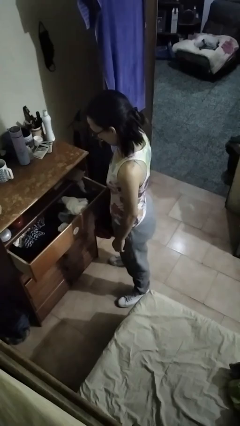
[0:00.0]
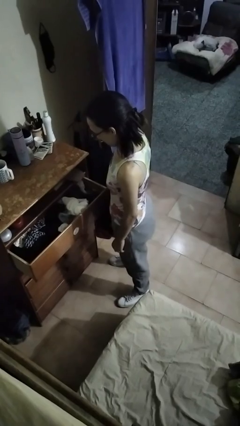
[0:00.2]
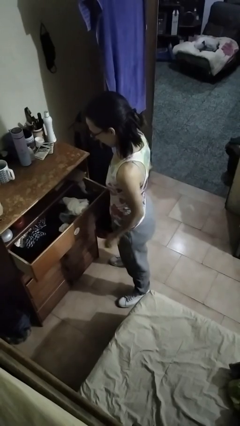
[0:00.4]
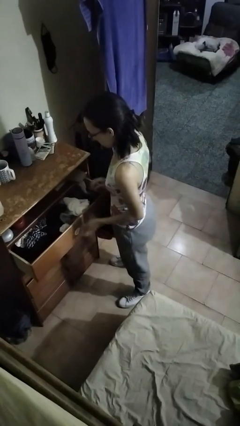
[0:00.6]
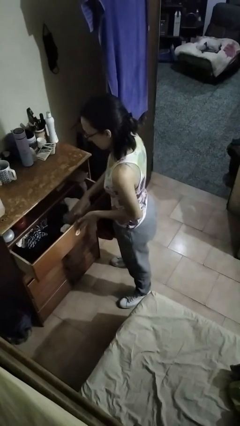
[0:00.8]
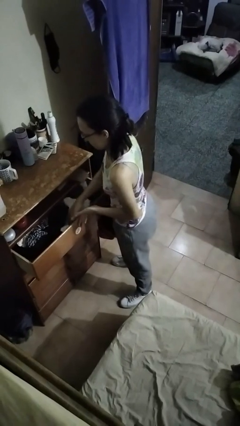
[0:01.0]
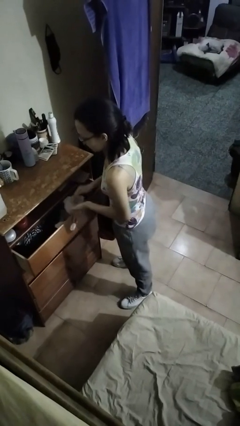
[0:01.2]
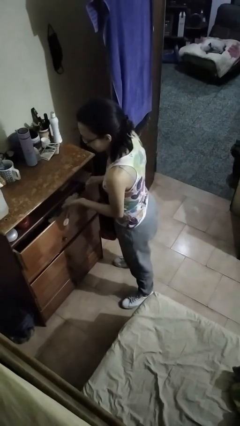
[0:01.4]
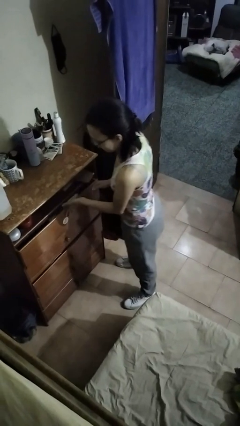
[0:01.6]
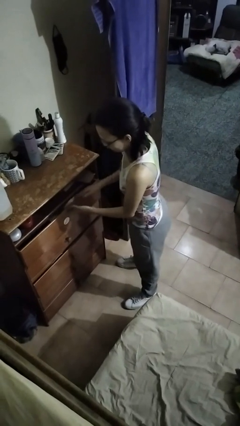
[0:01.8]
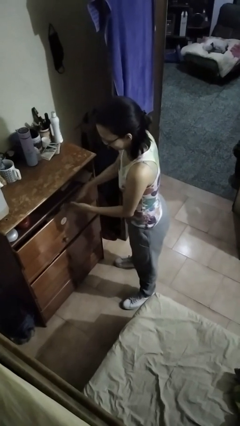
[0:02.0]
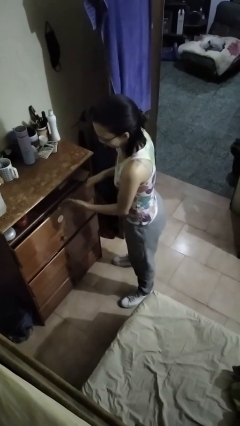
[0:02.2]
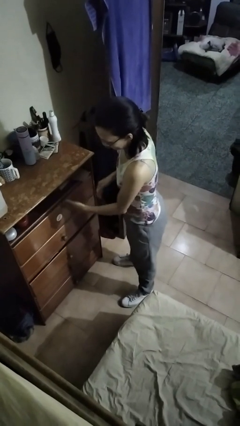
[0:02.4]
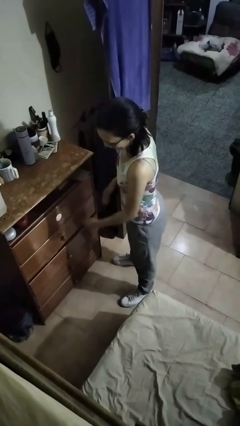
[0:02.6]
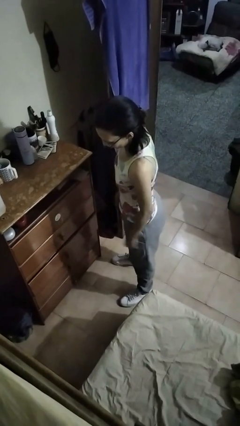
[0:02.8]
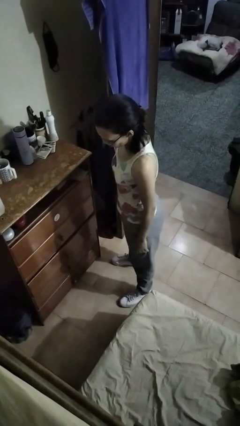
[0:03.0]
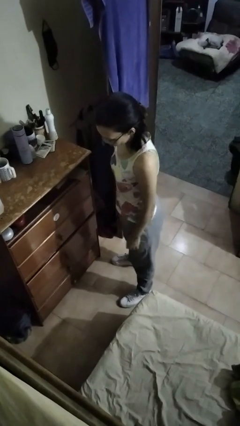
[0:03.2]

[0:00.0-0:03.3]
person closes dresser drawer

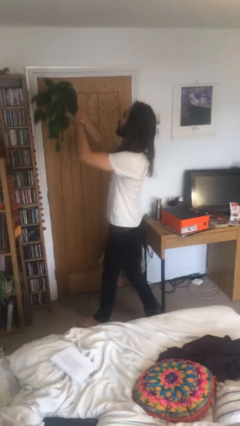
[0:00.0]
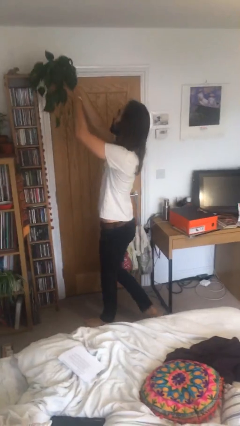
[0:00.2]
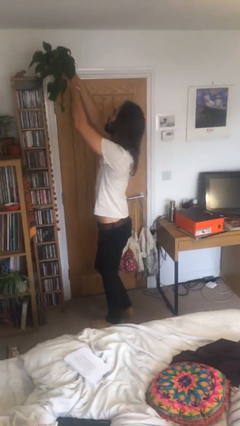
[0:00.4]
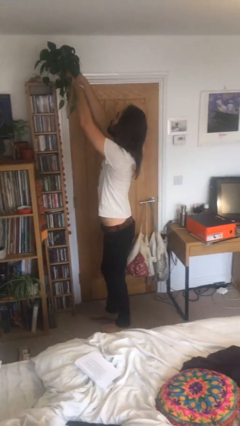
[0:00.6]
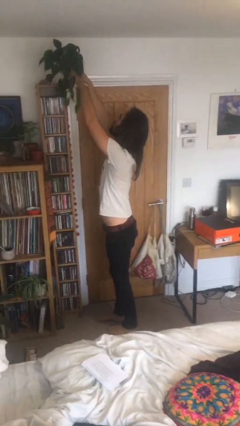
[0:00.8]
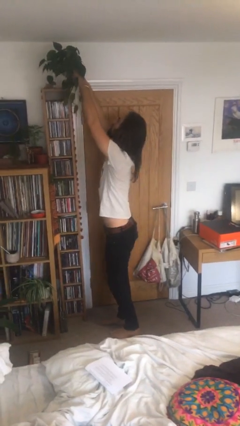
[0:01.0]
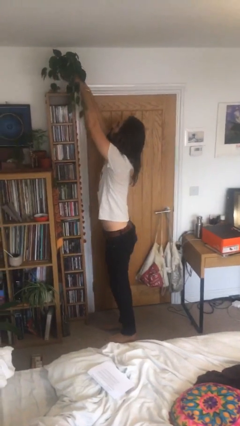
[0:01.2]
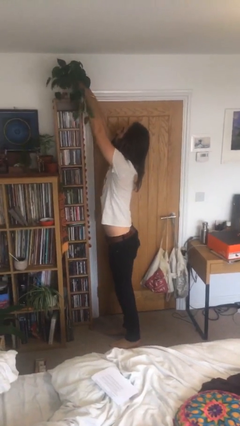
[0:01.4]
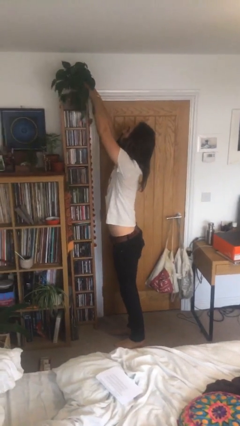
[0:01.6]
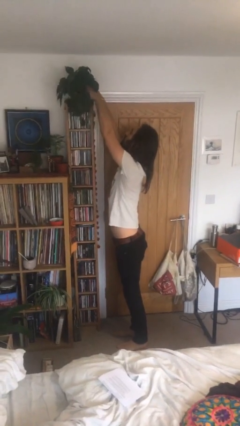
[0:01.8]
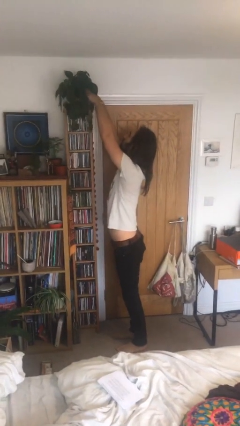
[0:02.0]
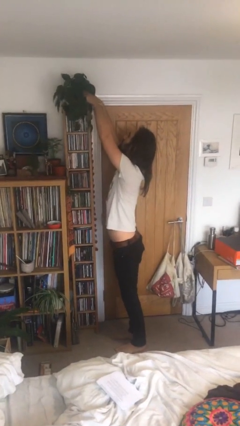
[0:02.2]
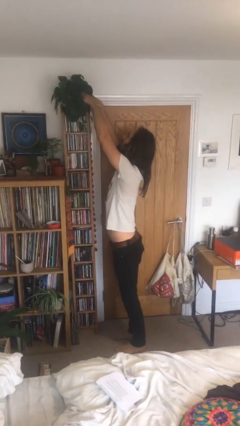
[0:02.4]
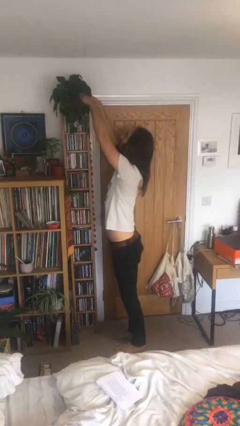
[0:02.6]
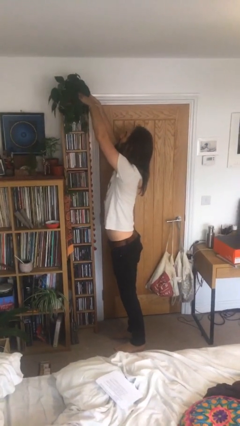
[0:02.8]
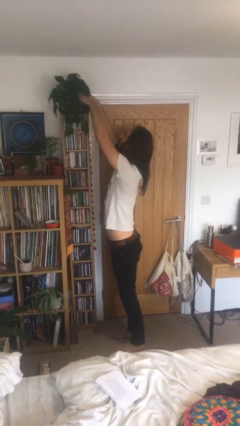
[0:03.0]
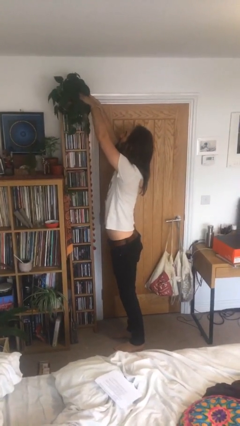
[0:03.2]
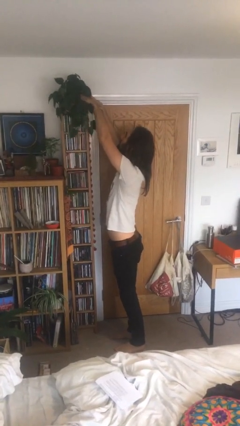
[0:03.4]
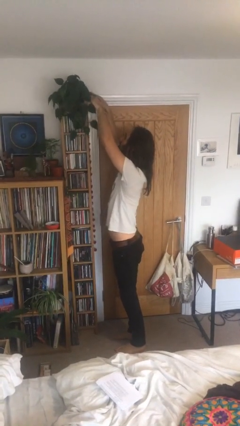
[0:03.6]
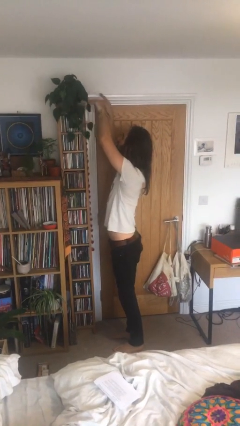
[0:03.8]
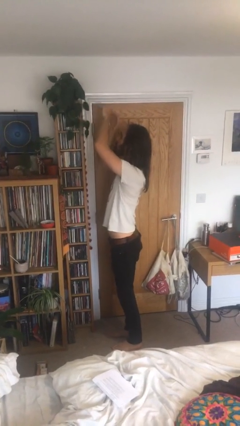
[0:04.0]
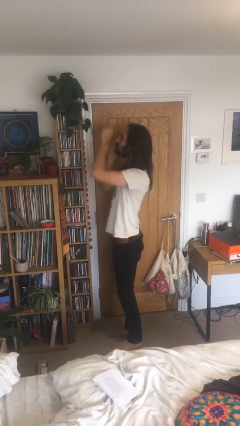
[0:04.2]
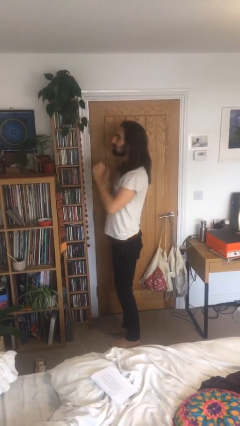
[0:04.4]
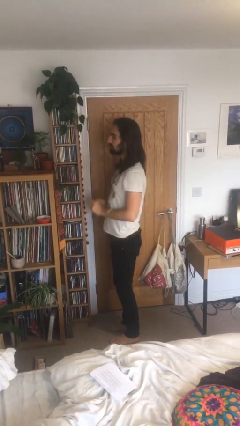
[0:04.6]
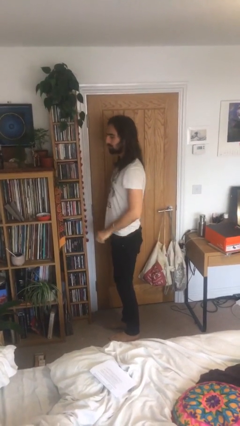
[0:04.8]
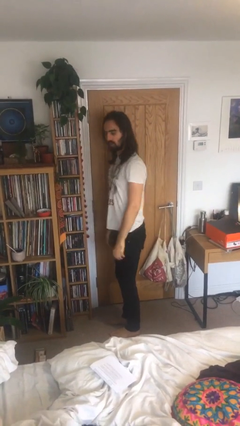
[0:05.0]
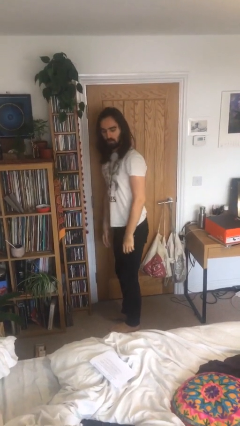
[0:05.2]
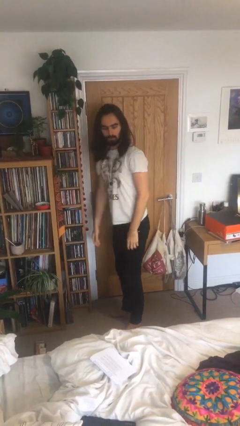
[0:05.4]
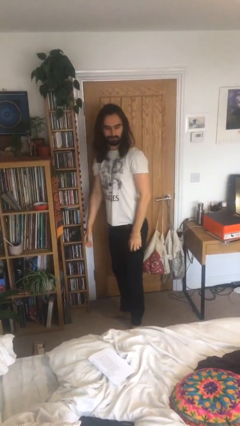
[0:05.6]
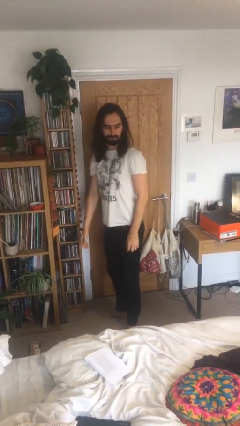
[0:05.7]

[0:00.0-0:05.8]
person puts down object on shelf

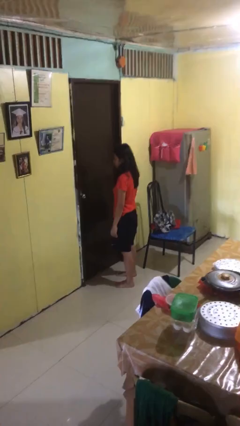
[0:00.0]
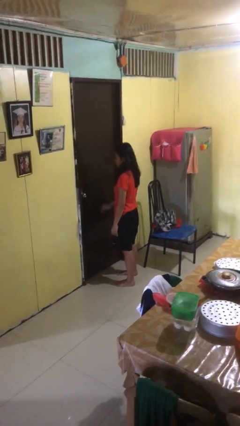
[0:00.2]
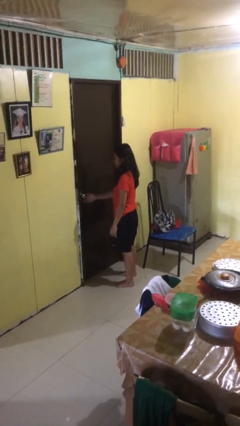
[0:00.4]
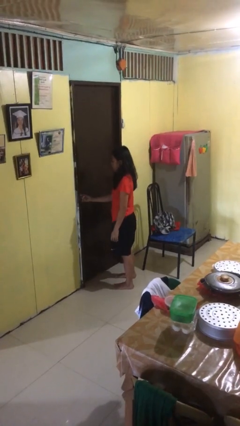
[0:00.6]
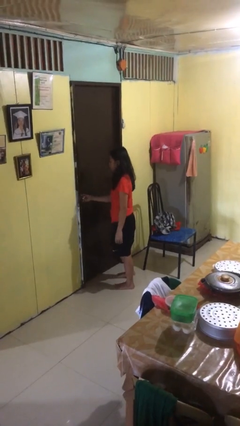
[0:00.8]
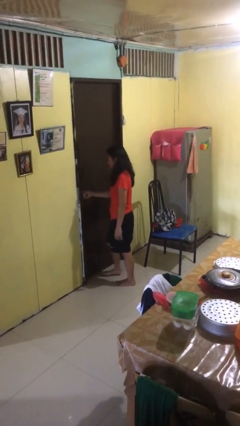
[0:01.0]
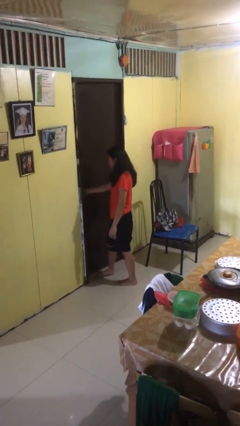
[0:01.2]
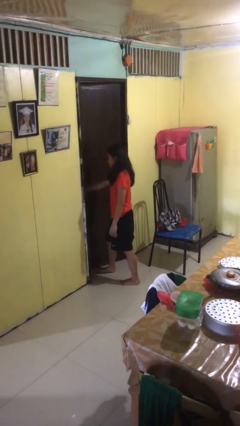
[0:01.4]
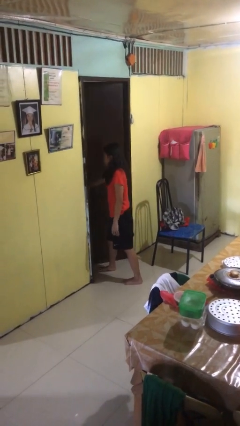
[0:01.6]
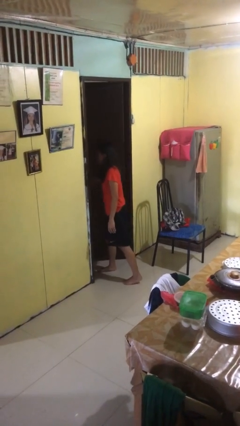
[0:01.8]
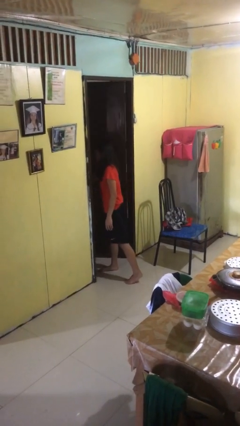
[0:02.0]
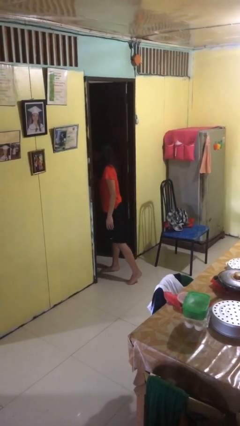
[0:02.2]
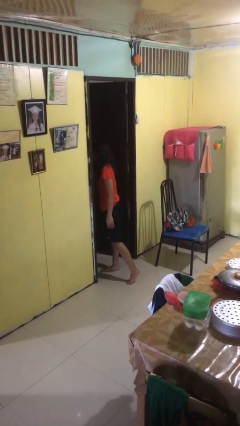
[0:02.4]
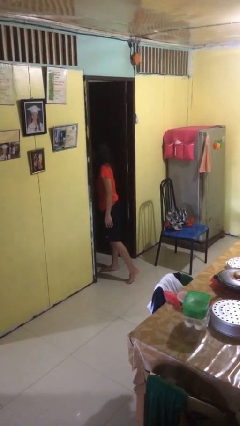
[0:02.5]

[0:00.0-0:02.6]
person opens facility door

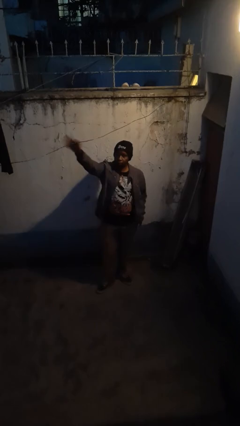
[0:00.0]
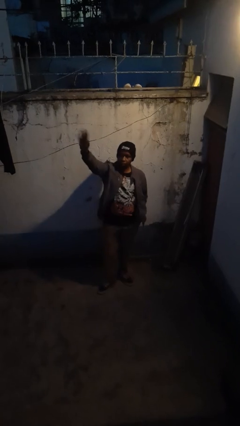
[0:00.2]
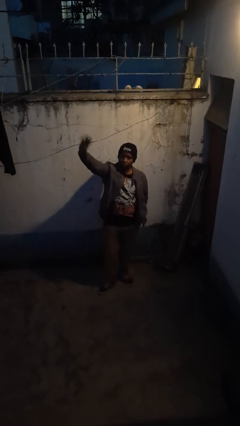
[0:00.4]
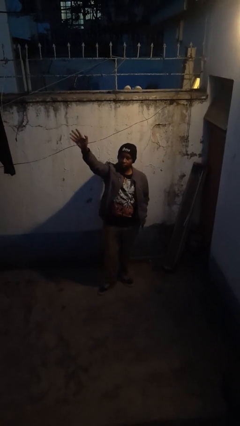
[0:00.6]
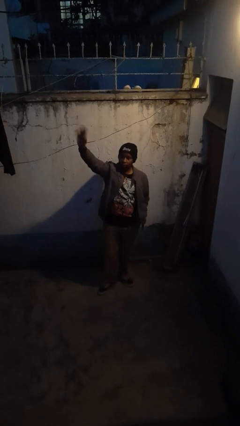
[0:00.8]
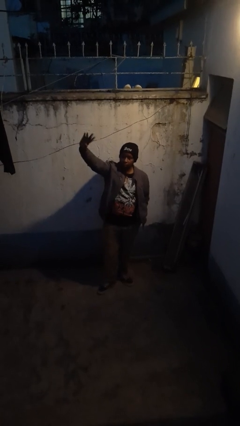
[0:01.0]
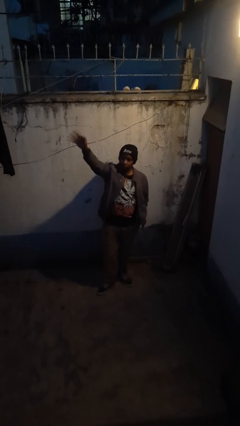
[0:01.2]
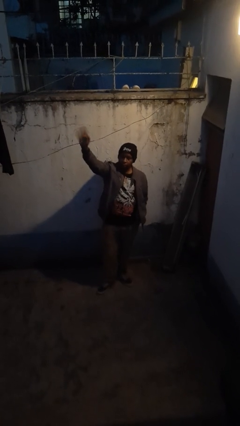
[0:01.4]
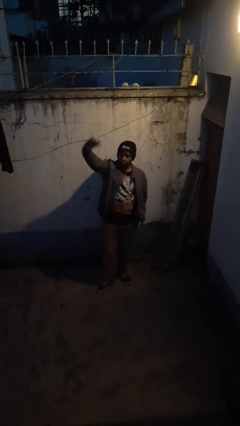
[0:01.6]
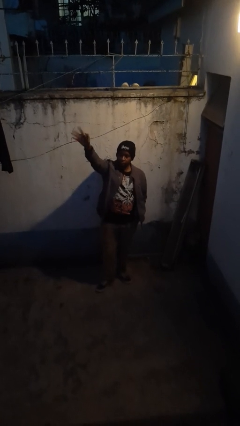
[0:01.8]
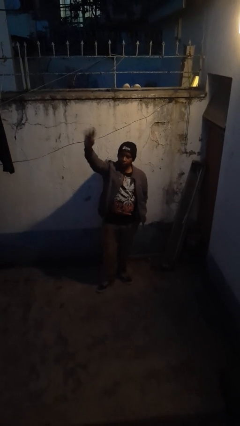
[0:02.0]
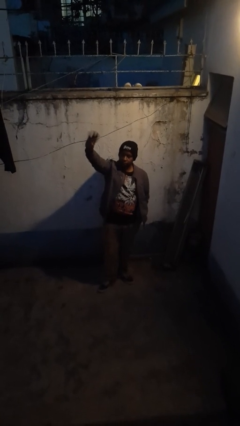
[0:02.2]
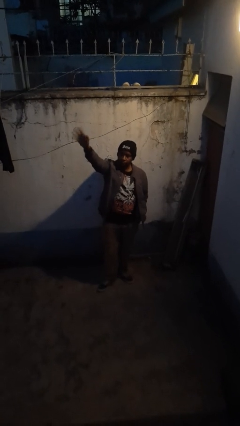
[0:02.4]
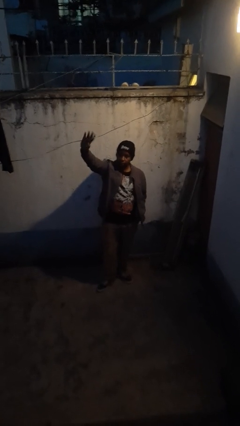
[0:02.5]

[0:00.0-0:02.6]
person waves at person

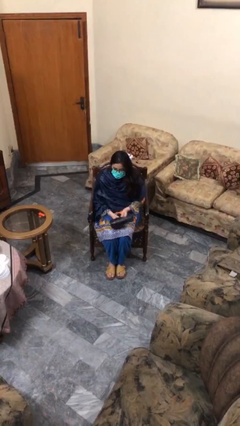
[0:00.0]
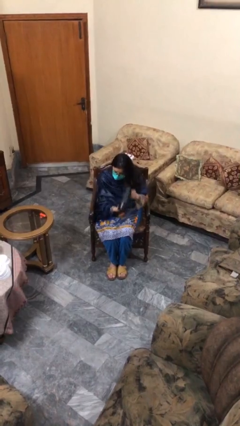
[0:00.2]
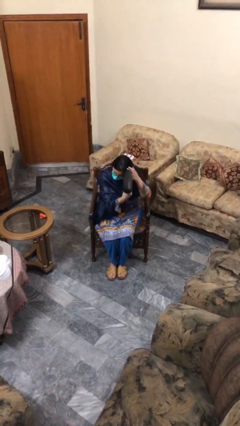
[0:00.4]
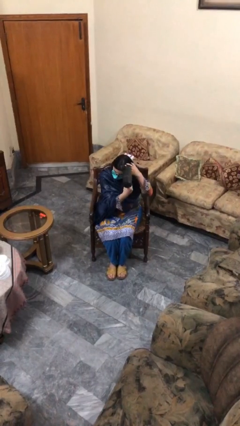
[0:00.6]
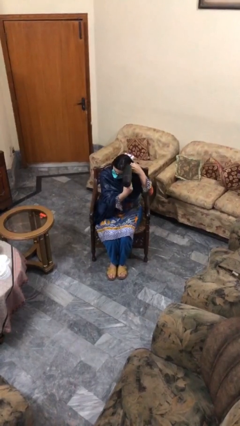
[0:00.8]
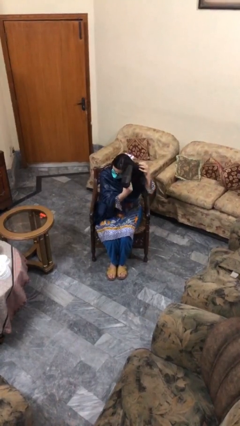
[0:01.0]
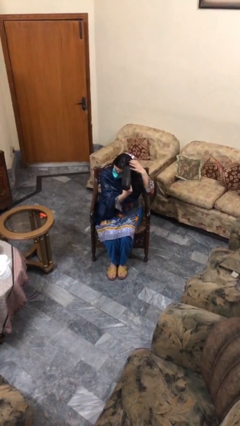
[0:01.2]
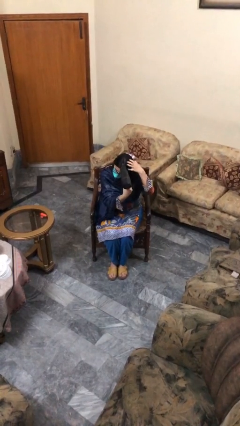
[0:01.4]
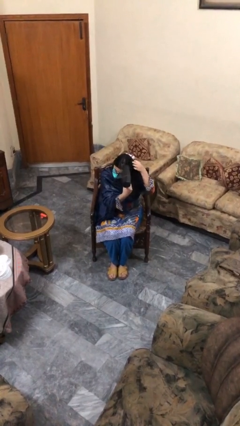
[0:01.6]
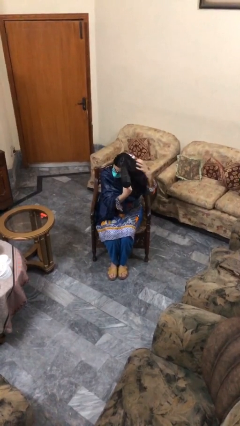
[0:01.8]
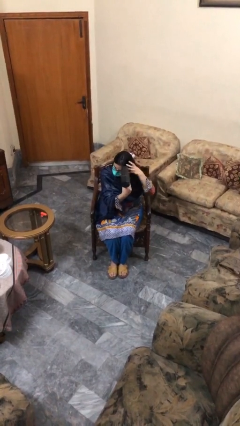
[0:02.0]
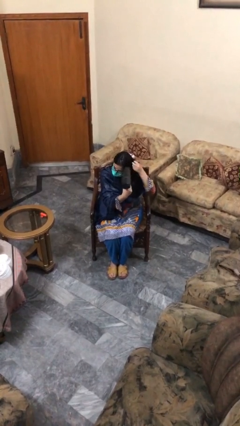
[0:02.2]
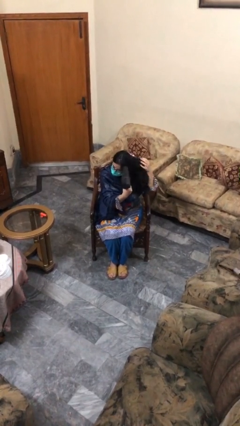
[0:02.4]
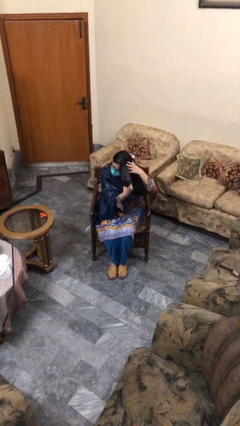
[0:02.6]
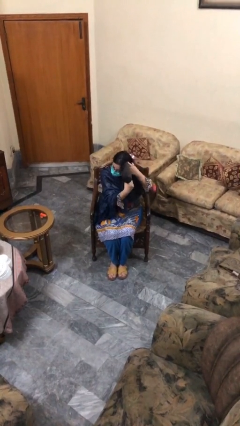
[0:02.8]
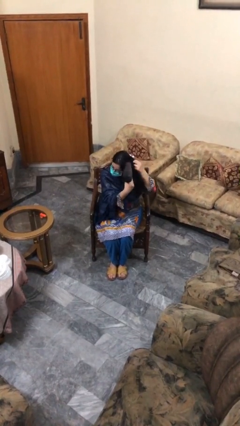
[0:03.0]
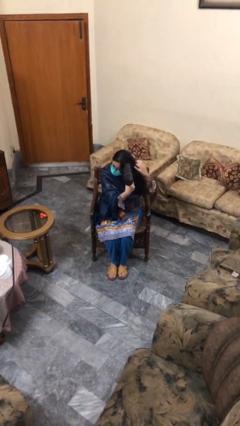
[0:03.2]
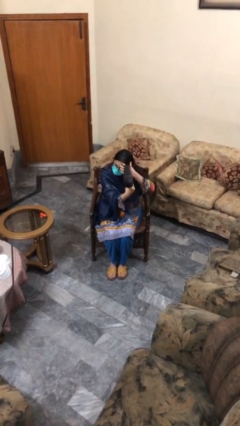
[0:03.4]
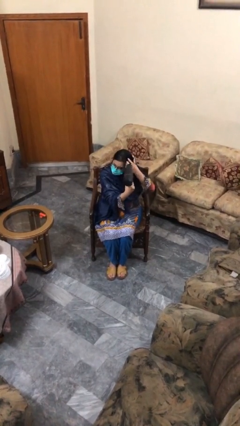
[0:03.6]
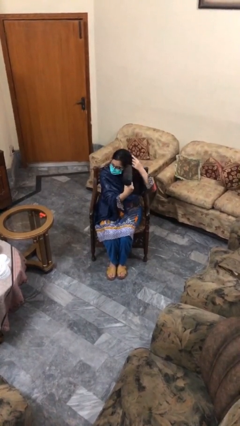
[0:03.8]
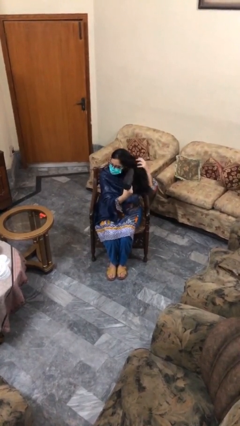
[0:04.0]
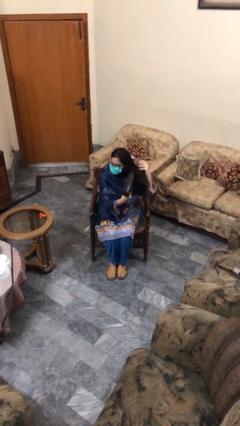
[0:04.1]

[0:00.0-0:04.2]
person dries hair with hairdryer
